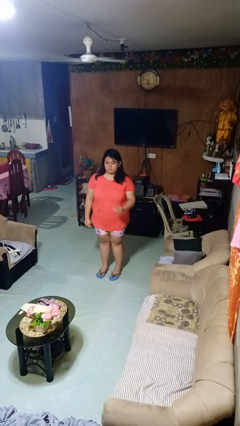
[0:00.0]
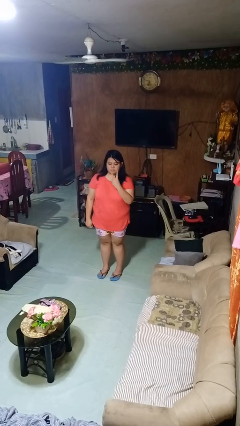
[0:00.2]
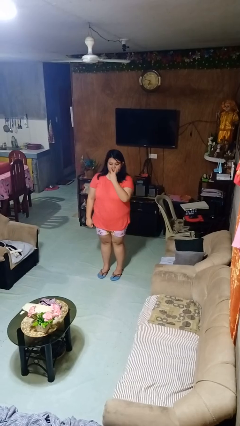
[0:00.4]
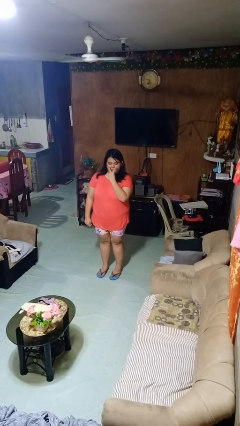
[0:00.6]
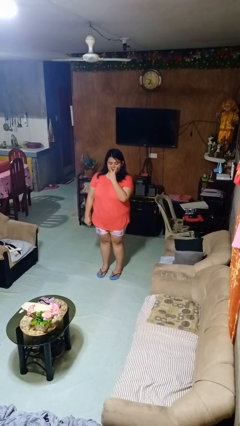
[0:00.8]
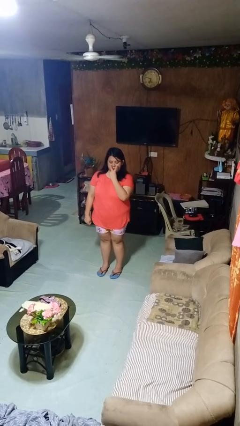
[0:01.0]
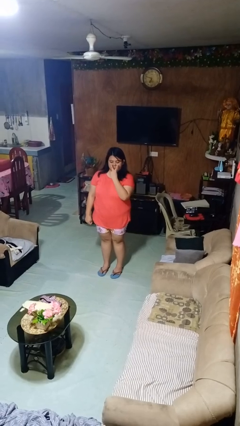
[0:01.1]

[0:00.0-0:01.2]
person gestures watch closely

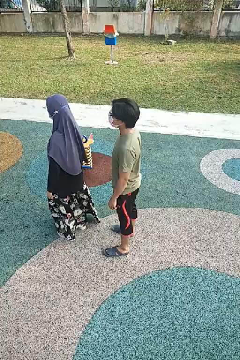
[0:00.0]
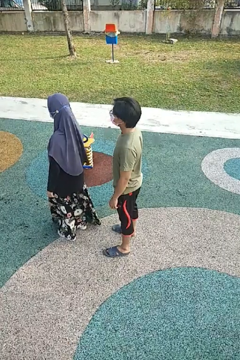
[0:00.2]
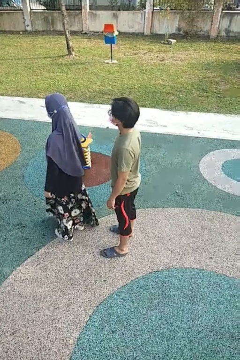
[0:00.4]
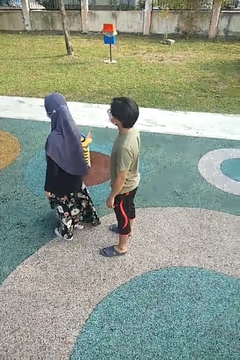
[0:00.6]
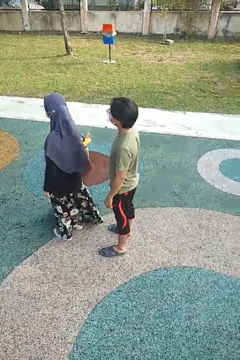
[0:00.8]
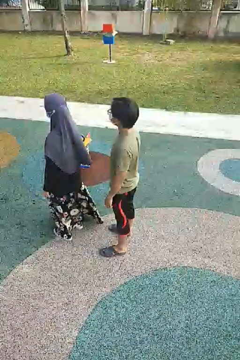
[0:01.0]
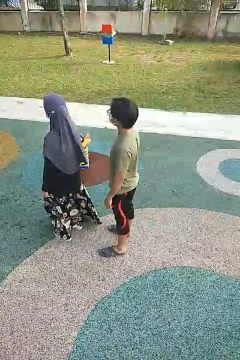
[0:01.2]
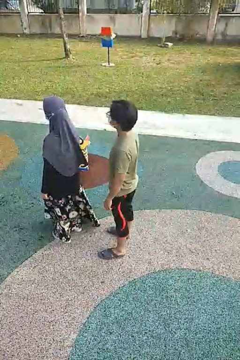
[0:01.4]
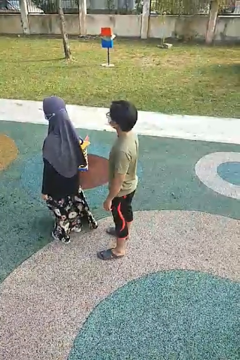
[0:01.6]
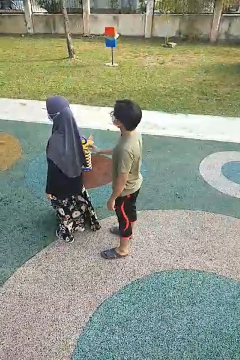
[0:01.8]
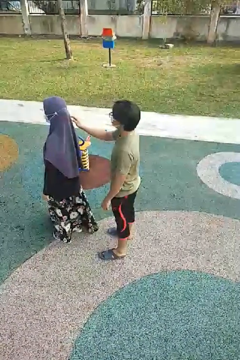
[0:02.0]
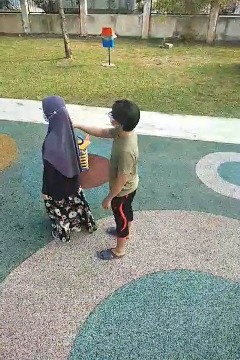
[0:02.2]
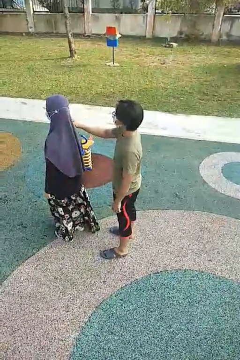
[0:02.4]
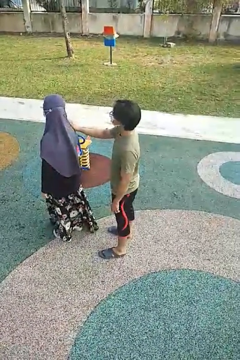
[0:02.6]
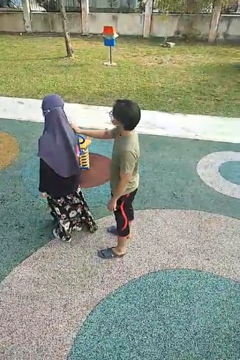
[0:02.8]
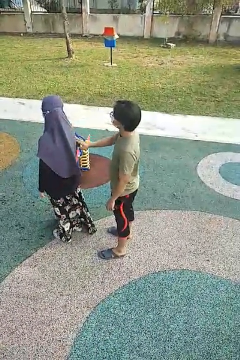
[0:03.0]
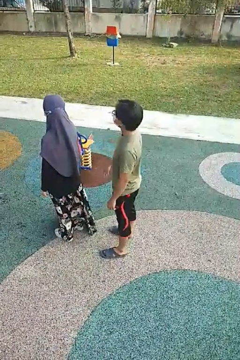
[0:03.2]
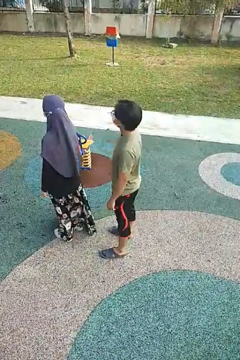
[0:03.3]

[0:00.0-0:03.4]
person touches back of person

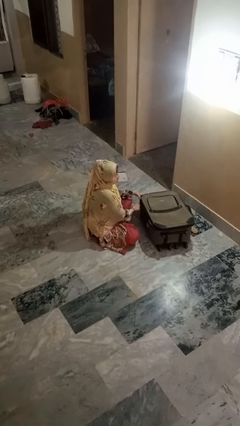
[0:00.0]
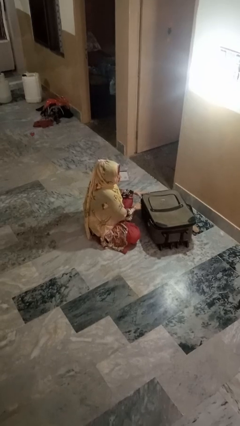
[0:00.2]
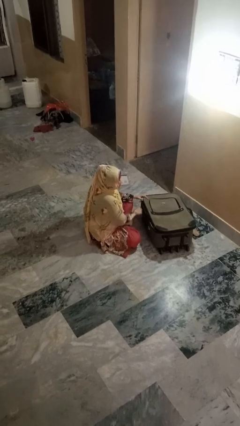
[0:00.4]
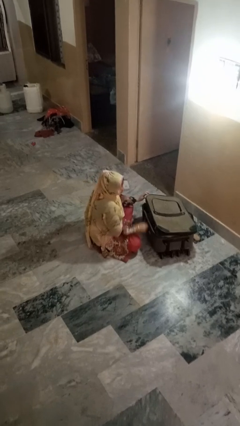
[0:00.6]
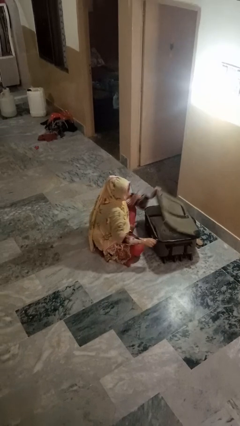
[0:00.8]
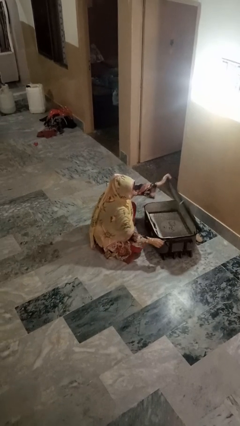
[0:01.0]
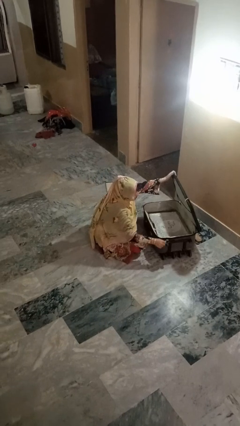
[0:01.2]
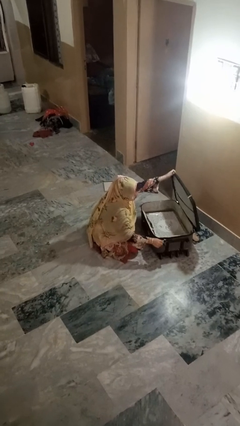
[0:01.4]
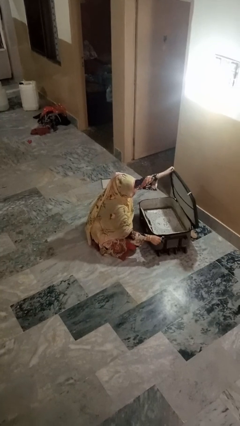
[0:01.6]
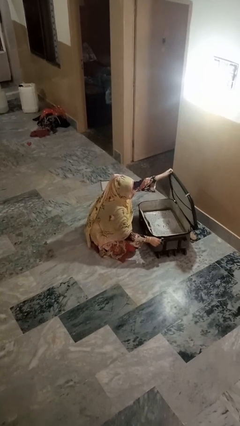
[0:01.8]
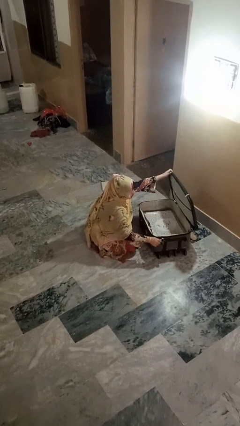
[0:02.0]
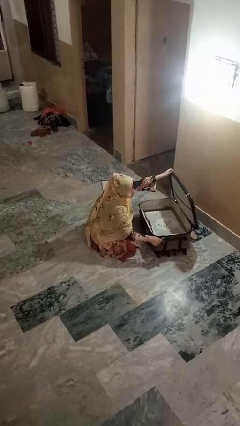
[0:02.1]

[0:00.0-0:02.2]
person opens suitcase

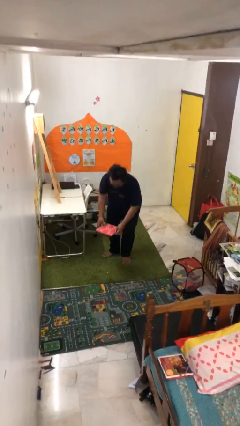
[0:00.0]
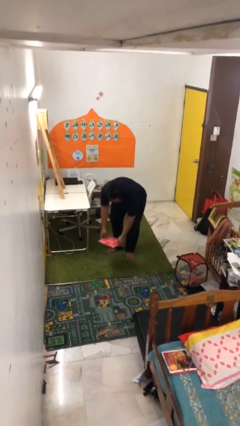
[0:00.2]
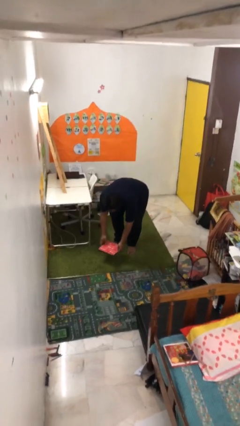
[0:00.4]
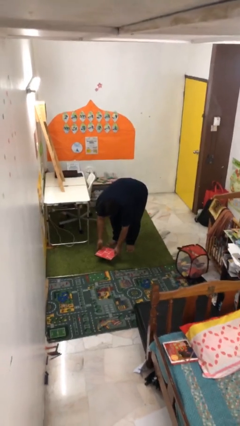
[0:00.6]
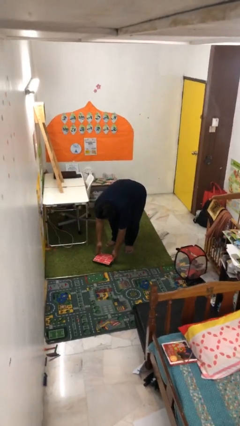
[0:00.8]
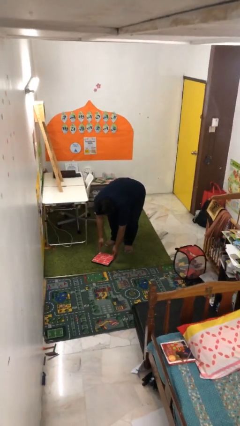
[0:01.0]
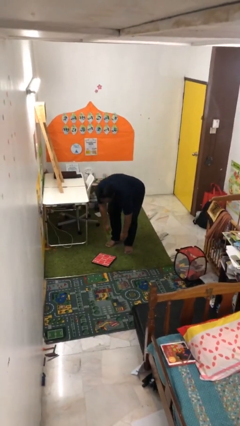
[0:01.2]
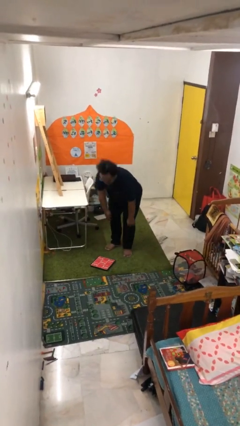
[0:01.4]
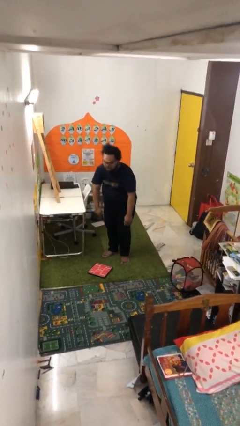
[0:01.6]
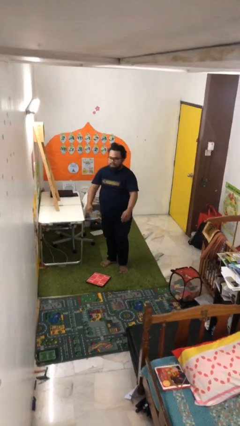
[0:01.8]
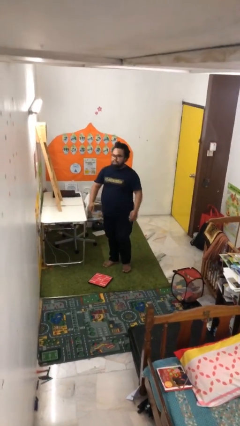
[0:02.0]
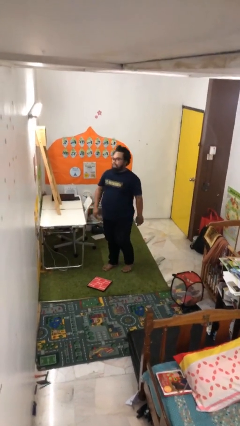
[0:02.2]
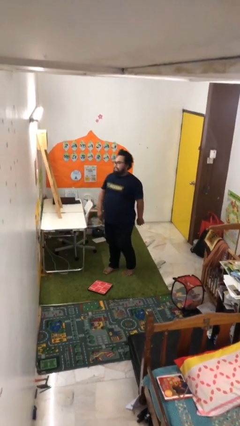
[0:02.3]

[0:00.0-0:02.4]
person puts down object on floor

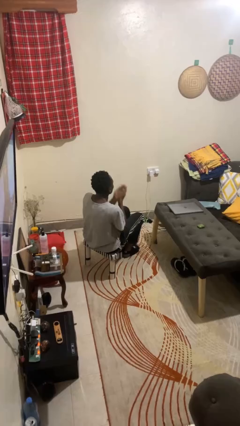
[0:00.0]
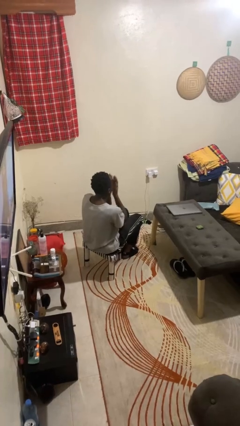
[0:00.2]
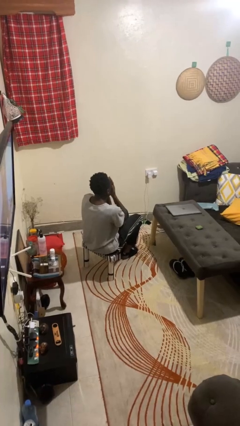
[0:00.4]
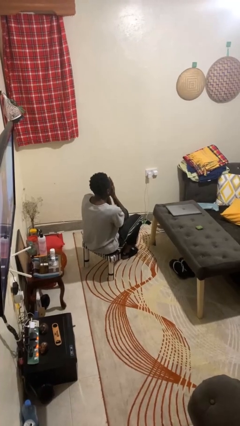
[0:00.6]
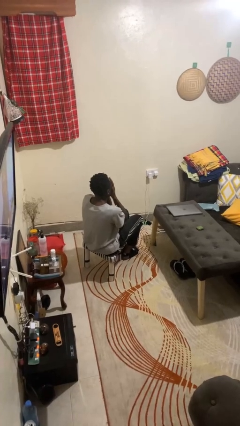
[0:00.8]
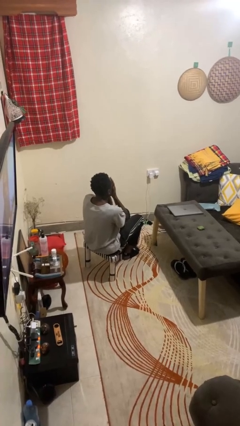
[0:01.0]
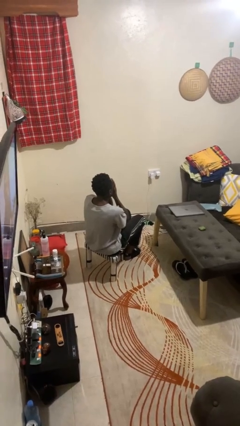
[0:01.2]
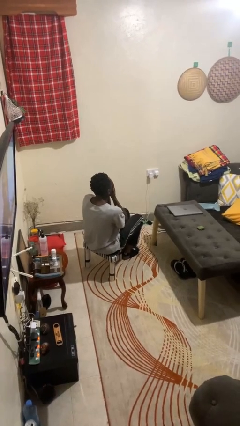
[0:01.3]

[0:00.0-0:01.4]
person covers face with hands

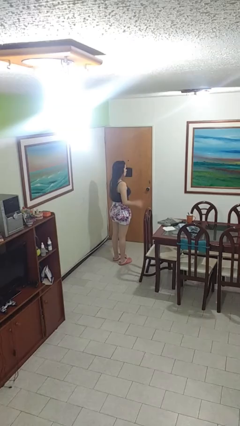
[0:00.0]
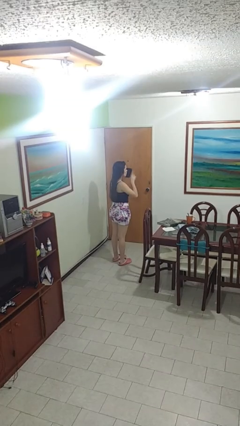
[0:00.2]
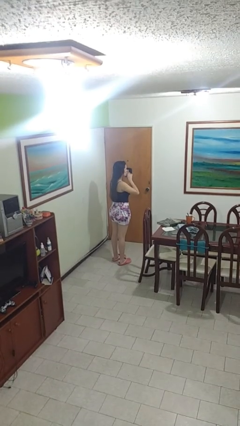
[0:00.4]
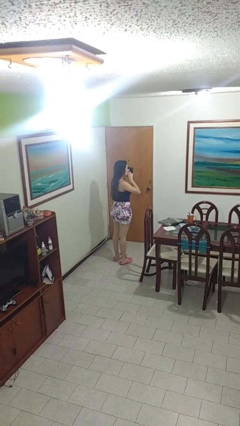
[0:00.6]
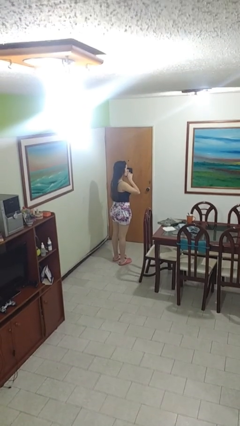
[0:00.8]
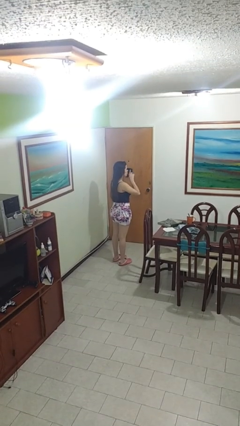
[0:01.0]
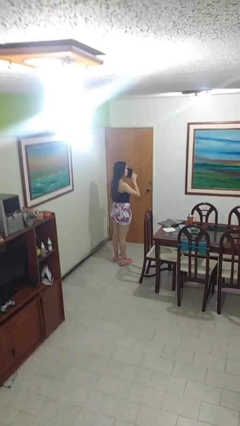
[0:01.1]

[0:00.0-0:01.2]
person gestures be quiet

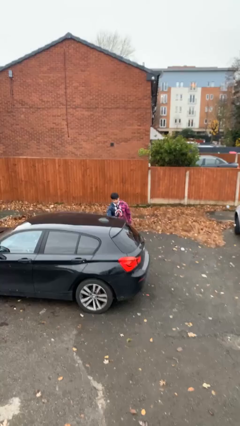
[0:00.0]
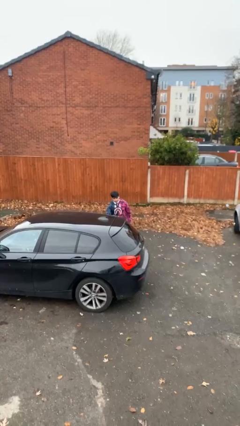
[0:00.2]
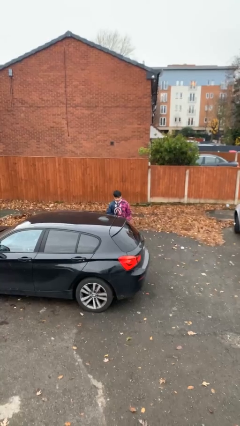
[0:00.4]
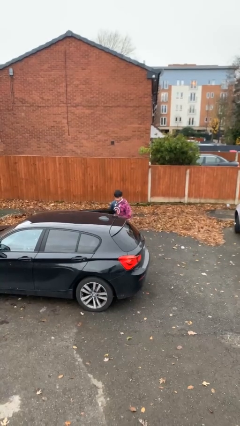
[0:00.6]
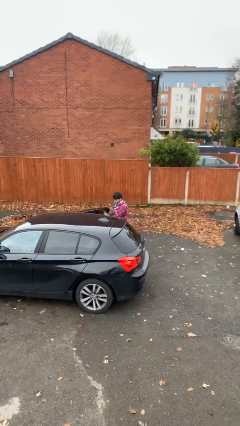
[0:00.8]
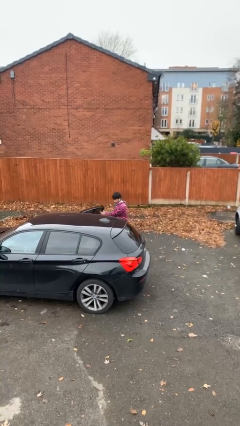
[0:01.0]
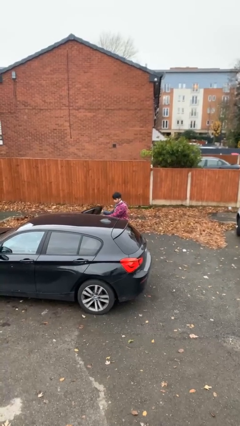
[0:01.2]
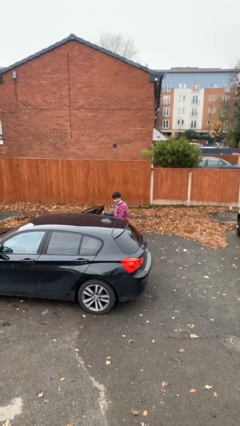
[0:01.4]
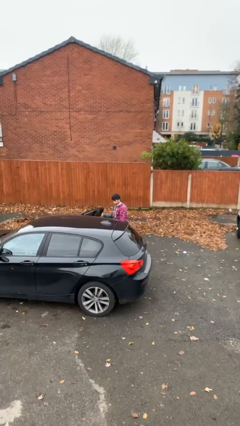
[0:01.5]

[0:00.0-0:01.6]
person opens car door

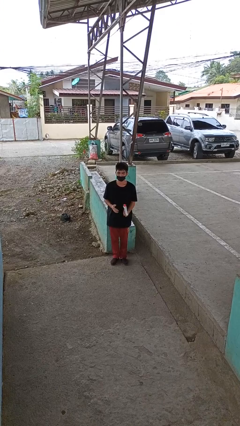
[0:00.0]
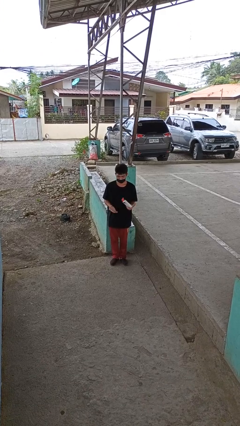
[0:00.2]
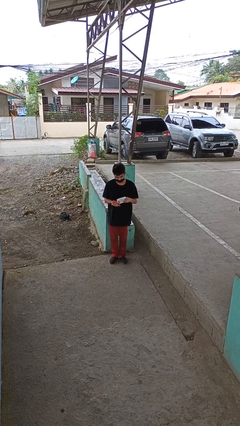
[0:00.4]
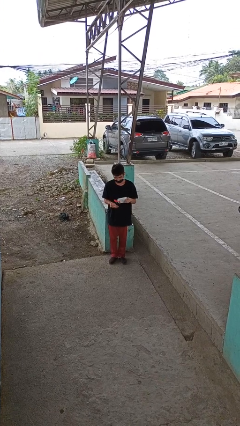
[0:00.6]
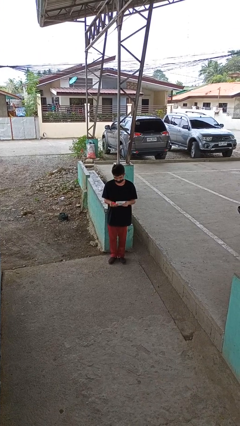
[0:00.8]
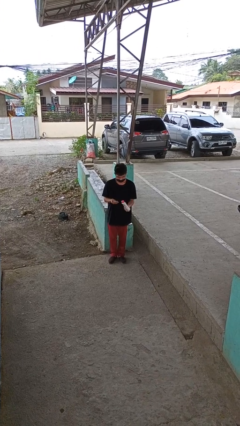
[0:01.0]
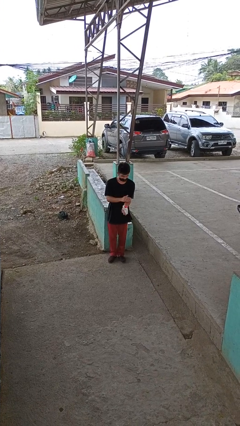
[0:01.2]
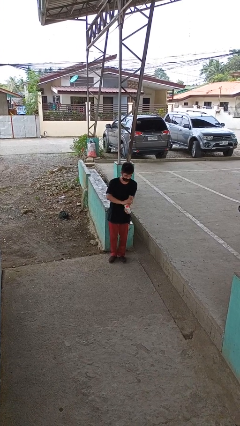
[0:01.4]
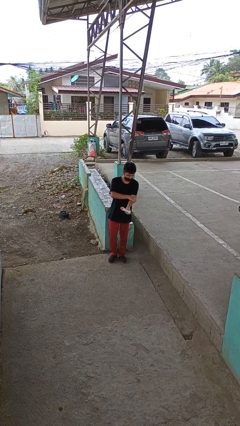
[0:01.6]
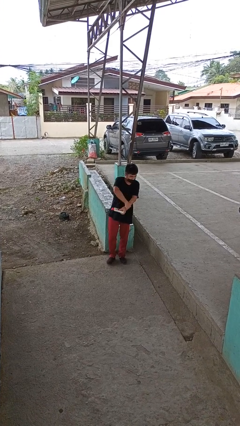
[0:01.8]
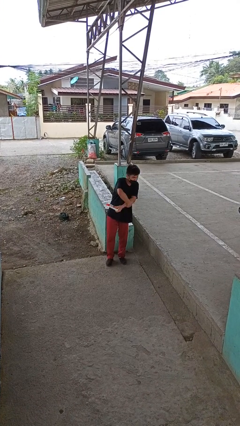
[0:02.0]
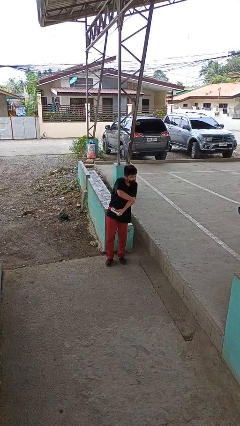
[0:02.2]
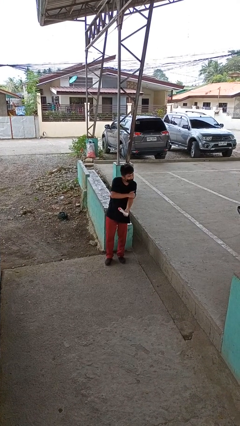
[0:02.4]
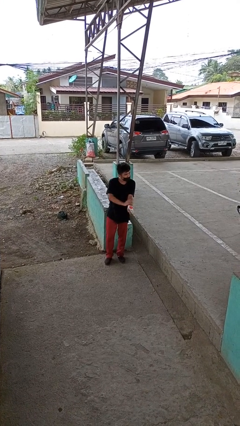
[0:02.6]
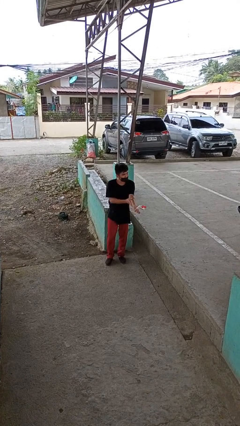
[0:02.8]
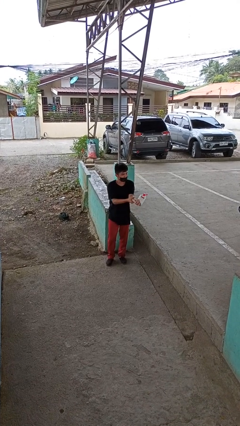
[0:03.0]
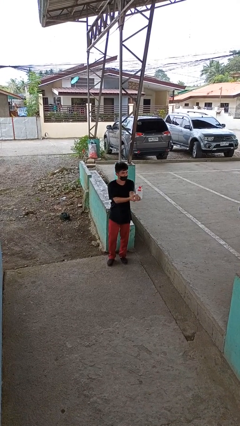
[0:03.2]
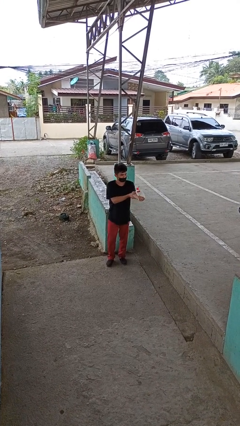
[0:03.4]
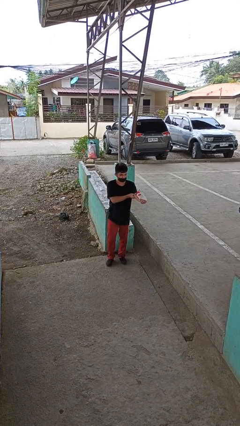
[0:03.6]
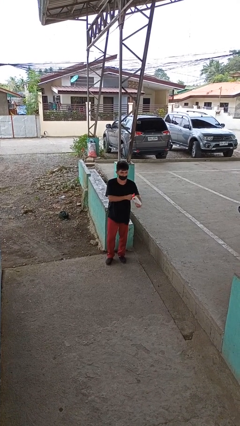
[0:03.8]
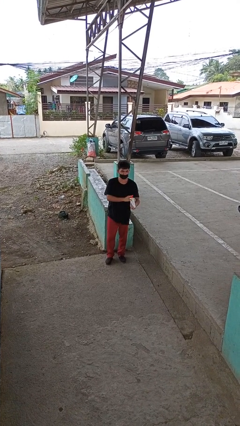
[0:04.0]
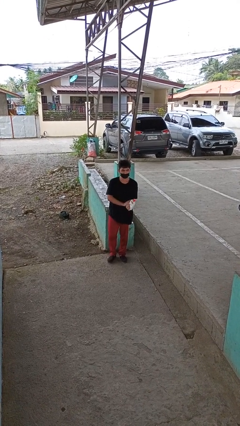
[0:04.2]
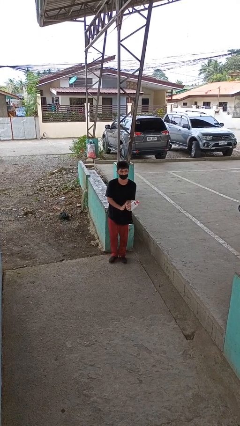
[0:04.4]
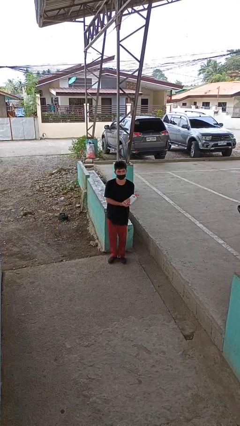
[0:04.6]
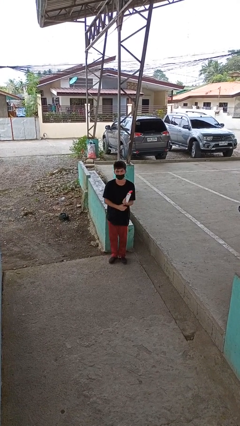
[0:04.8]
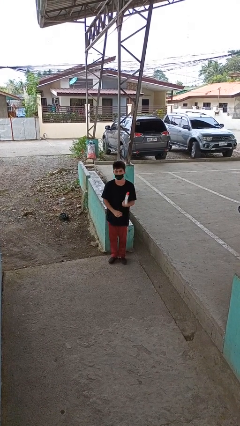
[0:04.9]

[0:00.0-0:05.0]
person applies sunscreen
